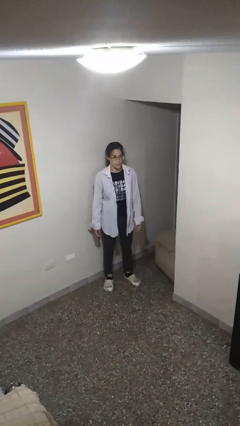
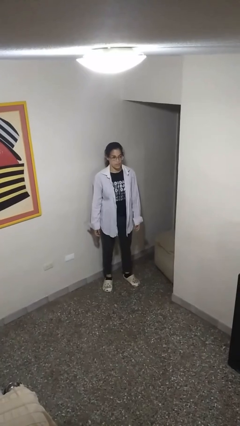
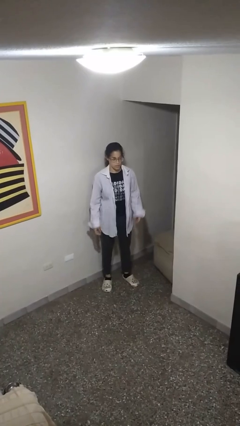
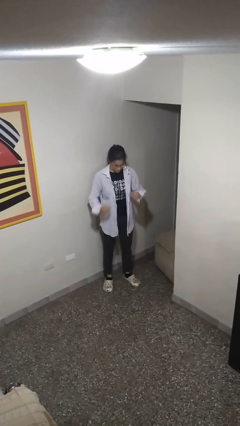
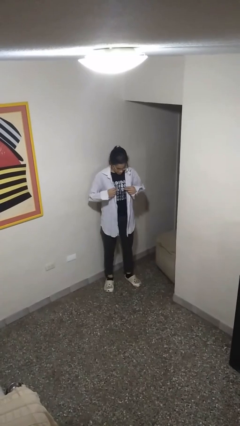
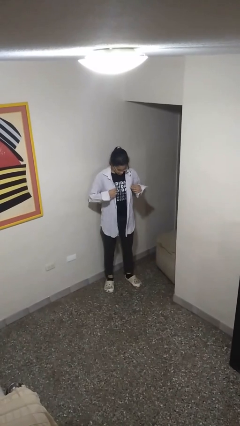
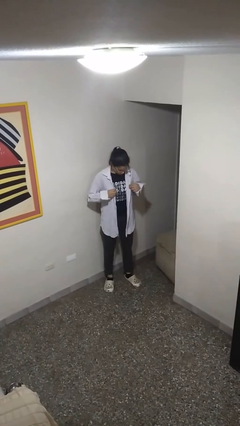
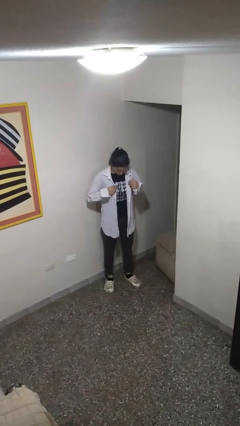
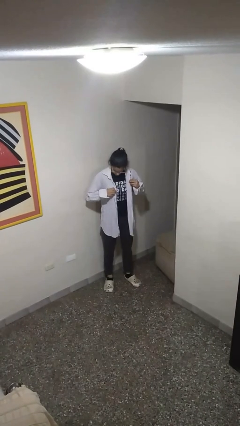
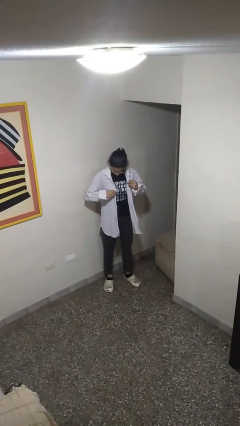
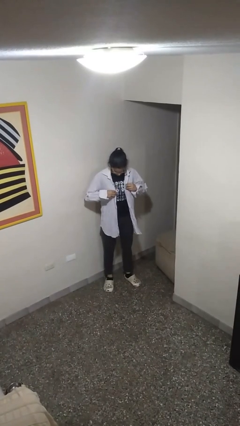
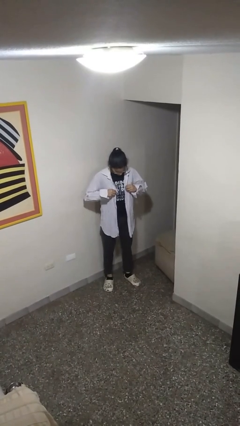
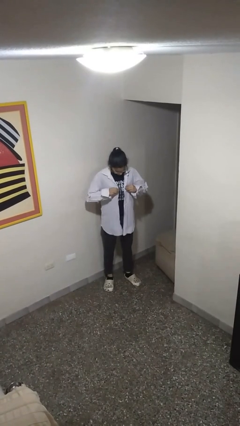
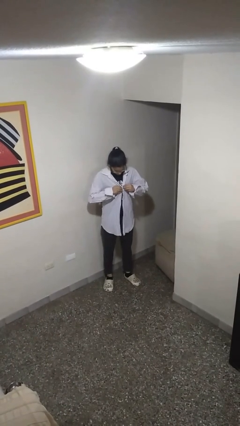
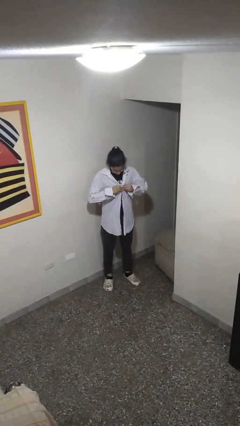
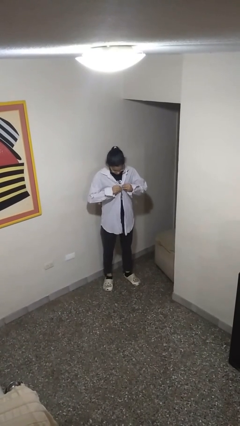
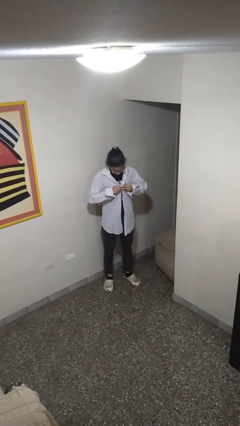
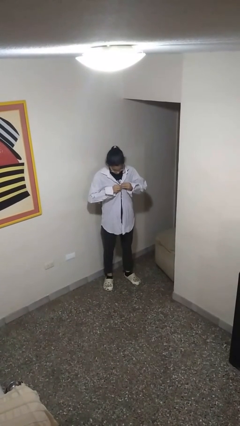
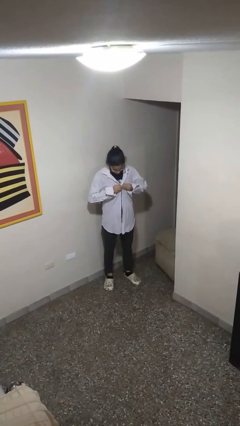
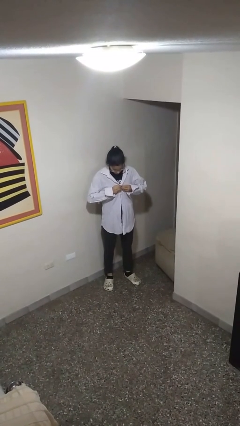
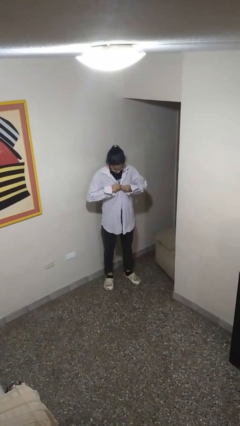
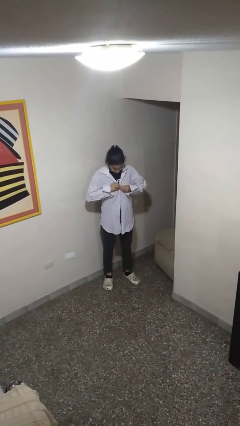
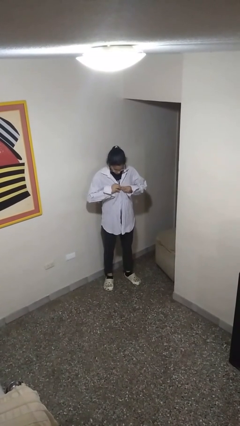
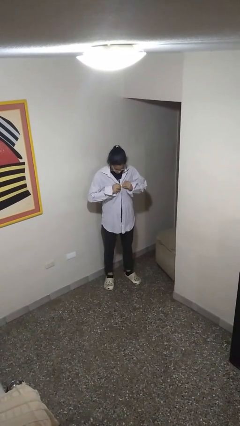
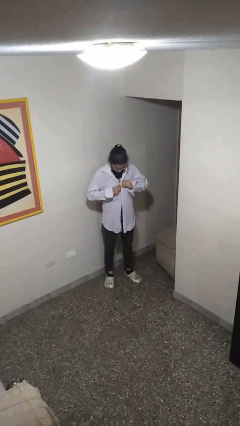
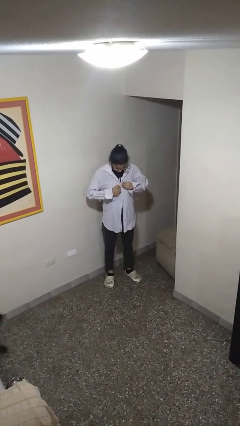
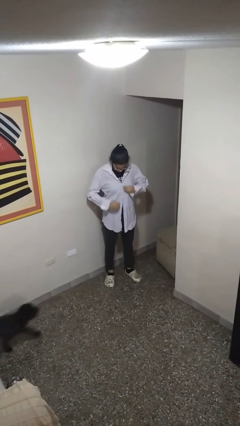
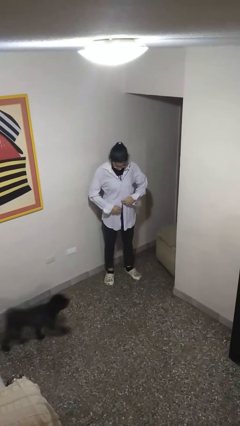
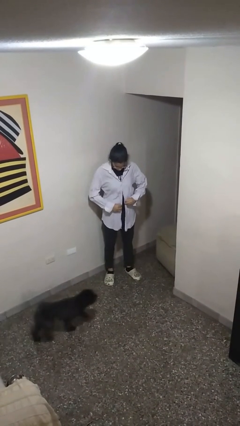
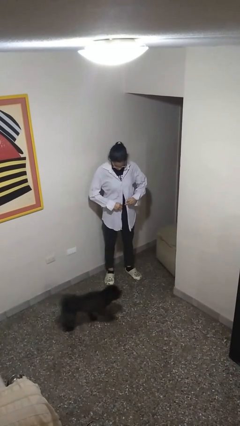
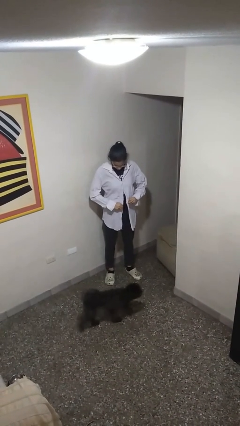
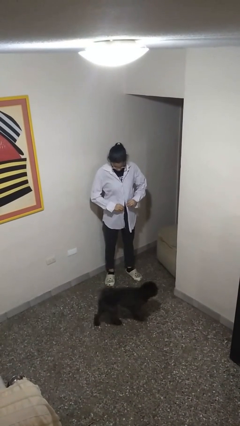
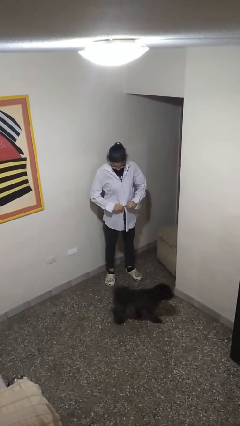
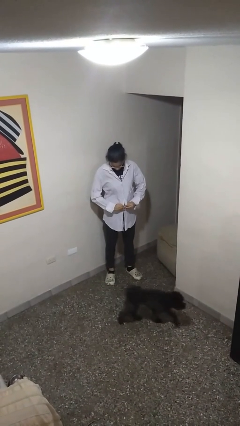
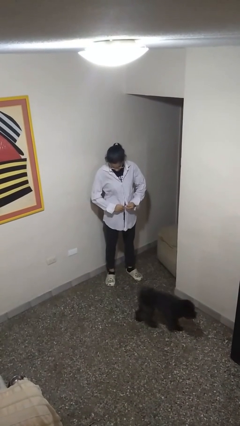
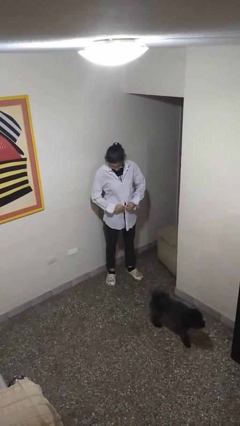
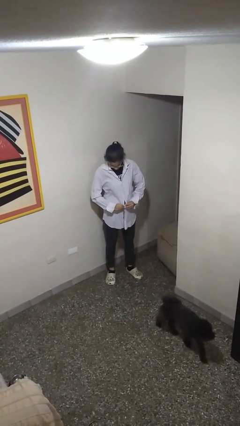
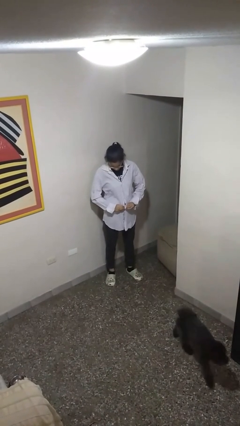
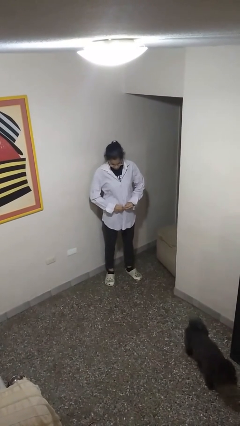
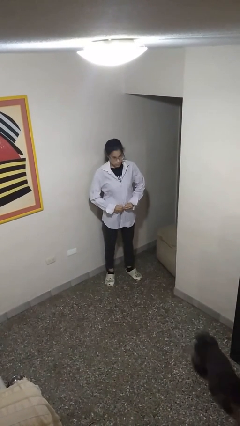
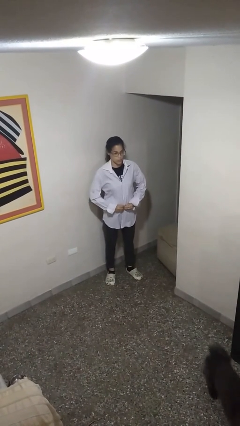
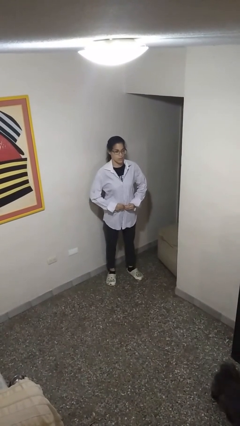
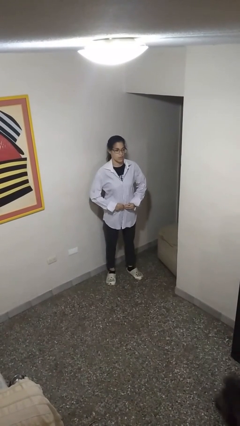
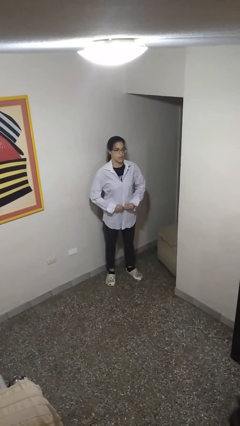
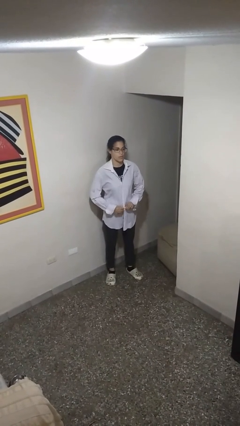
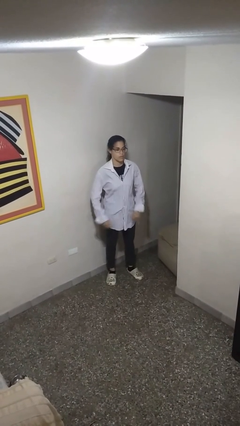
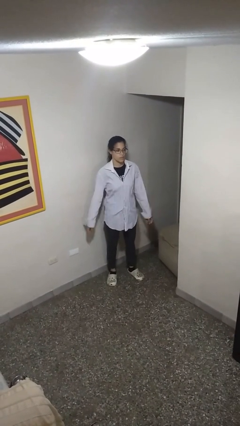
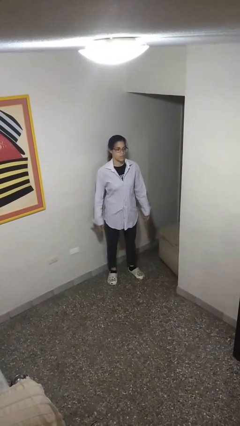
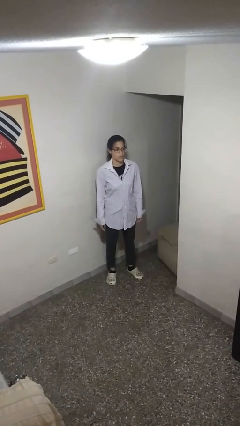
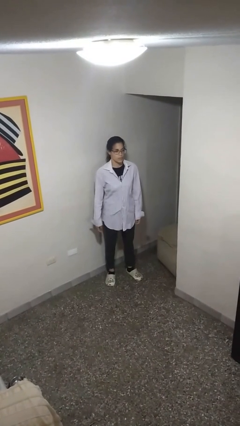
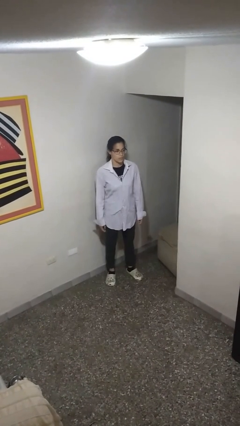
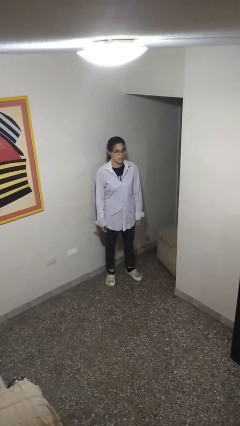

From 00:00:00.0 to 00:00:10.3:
person buttons shirt

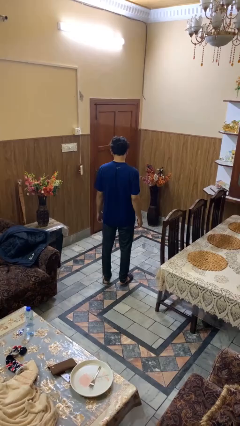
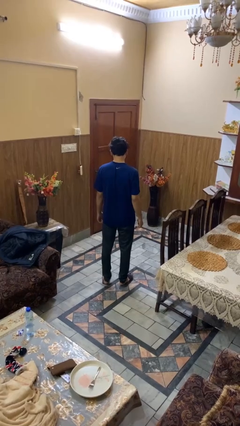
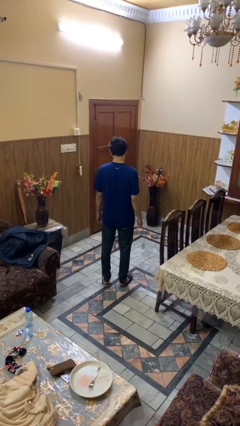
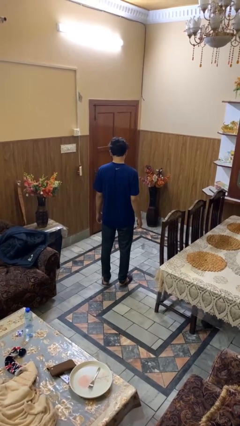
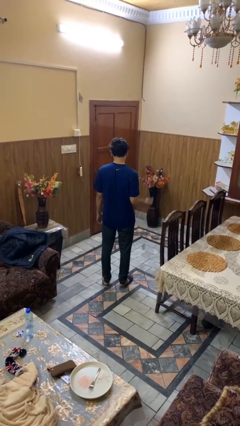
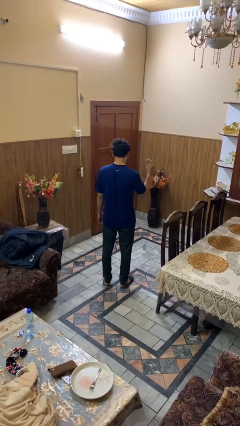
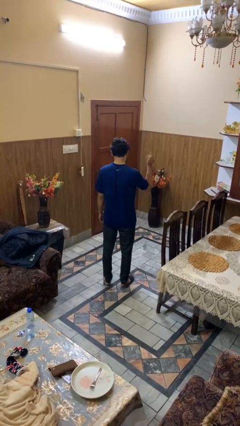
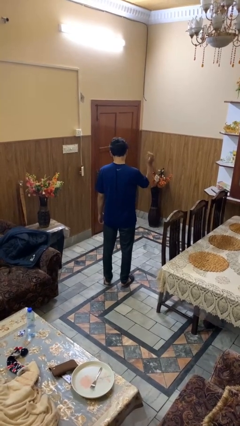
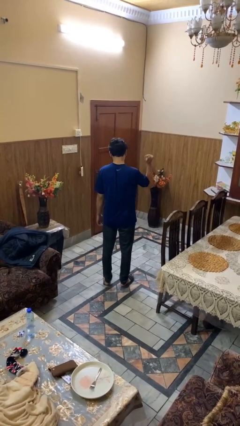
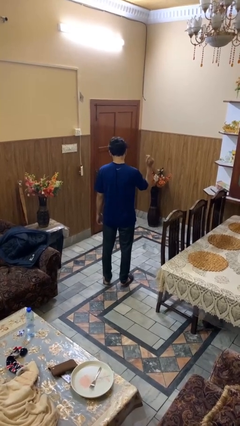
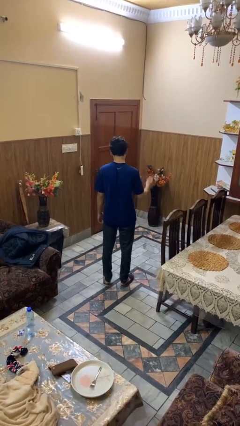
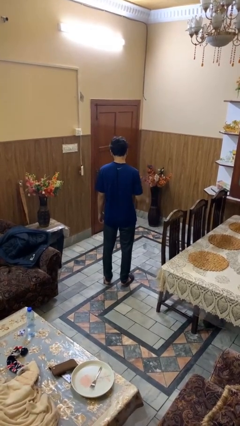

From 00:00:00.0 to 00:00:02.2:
person snaps fingers

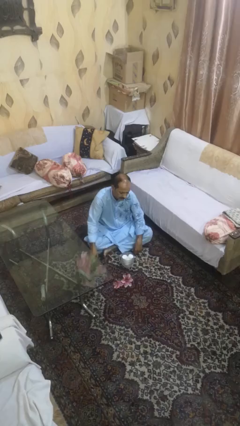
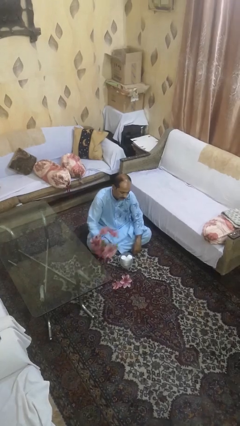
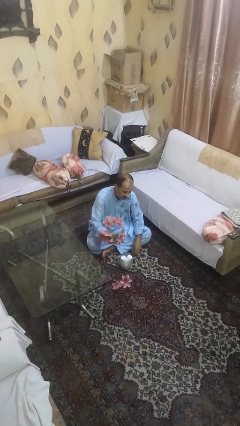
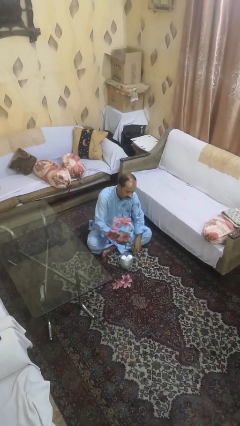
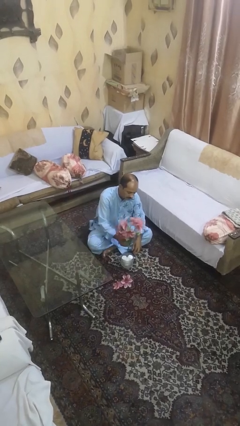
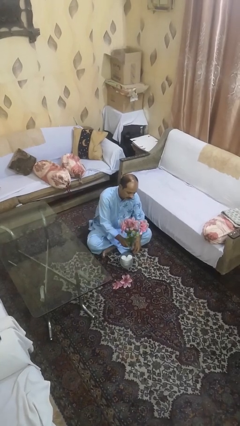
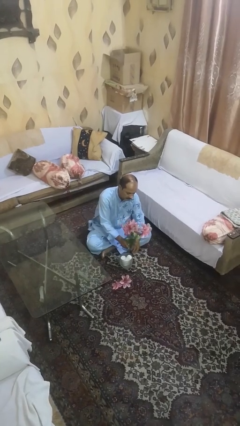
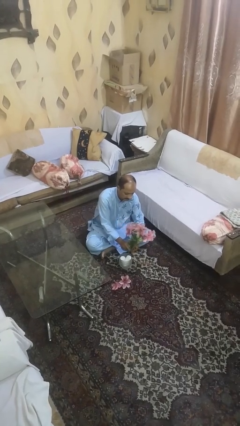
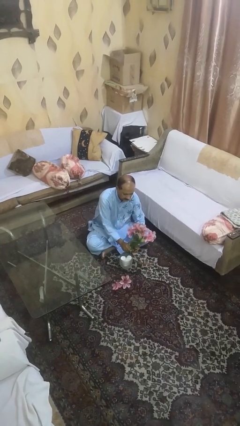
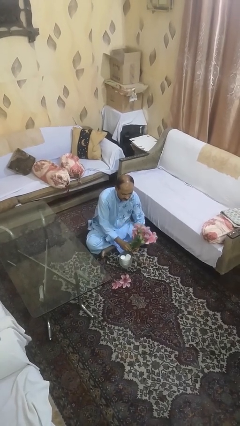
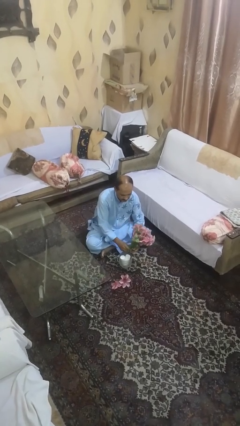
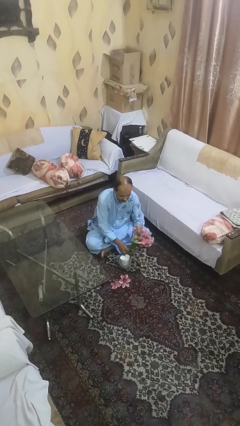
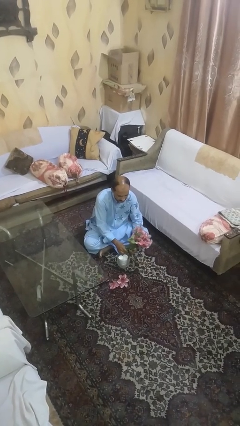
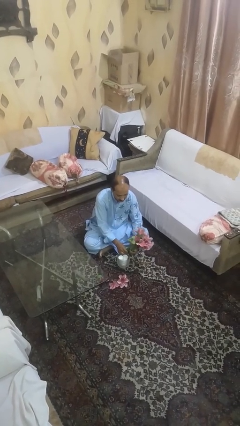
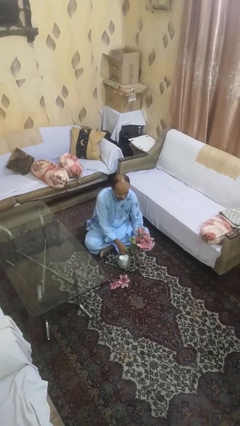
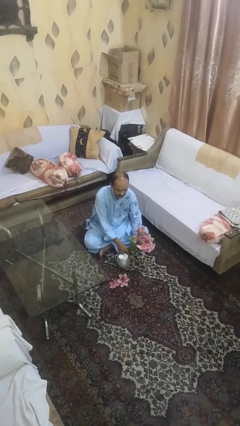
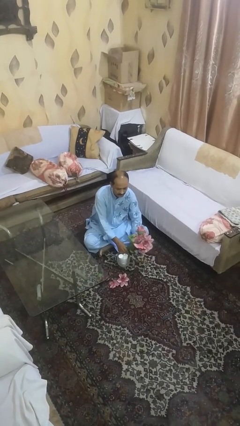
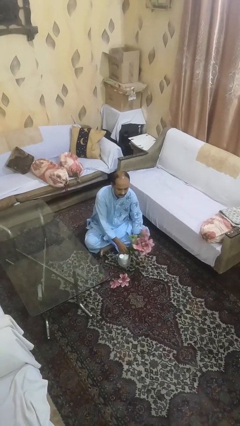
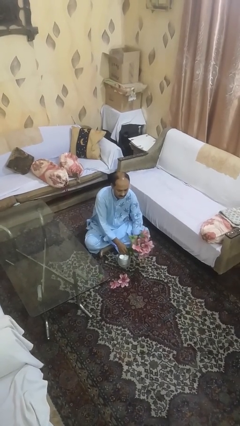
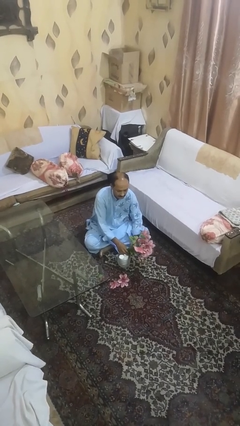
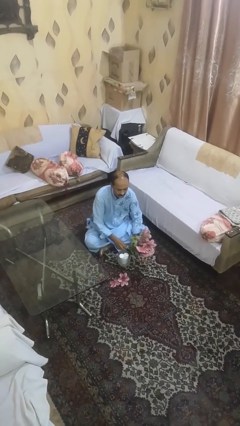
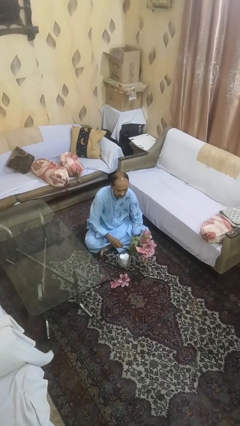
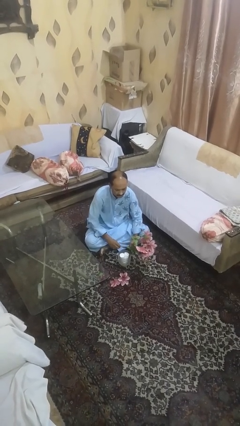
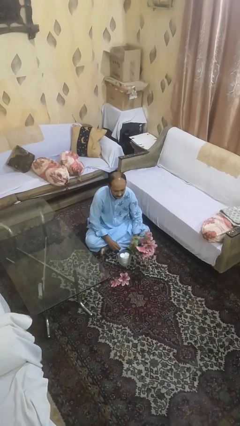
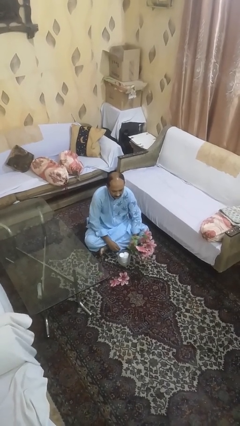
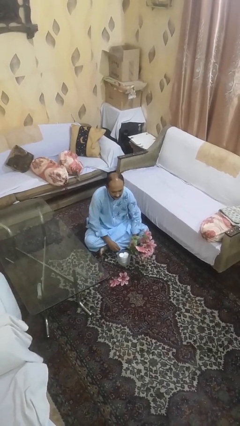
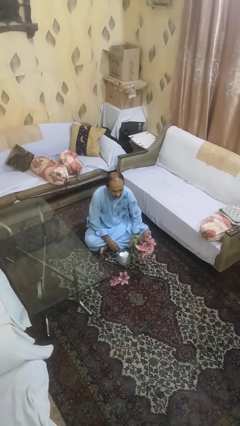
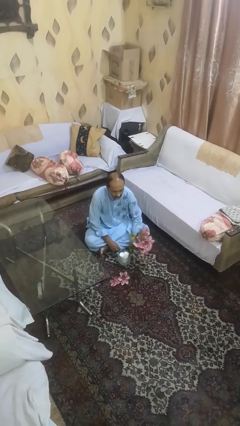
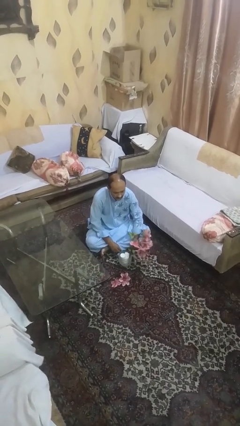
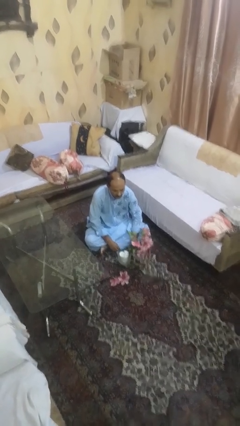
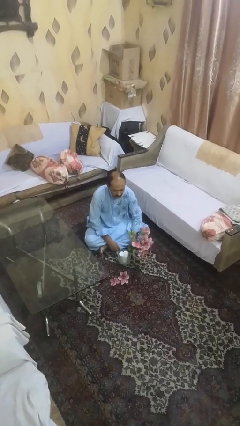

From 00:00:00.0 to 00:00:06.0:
person arranges flowers in vase
